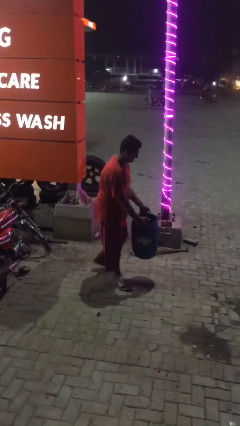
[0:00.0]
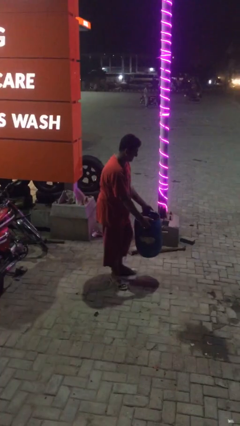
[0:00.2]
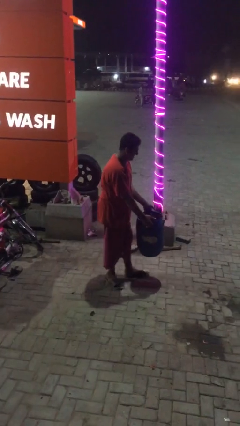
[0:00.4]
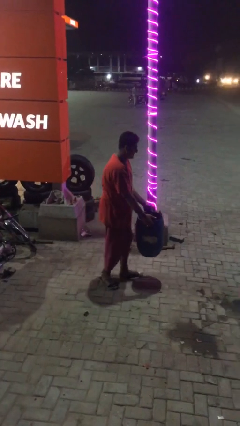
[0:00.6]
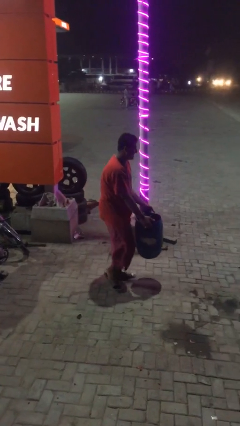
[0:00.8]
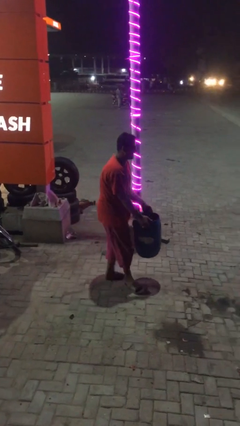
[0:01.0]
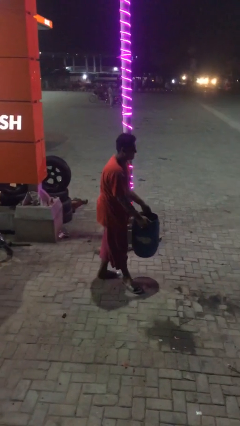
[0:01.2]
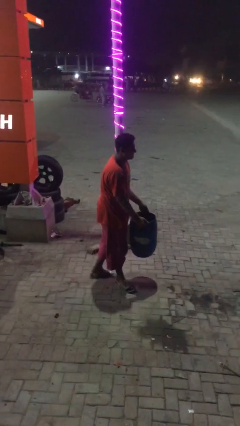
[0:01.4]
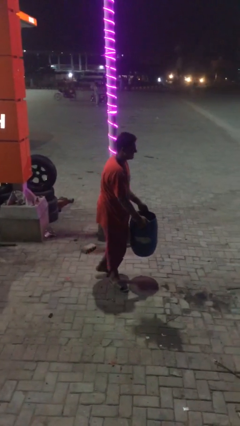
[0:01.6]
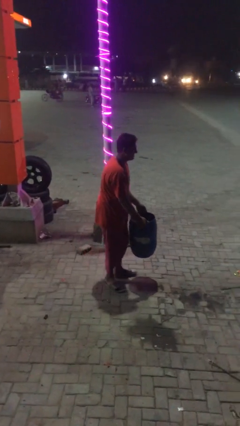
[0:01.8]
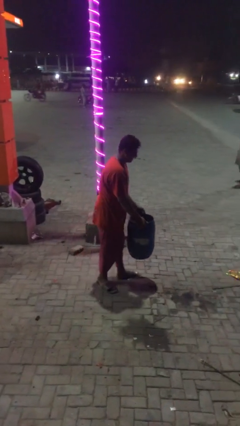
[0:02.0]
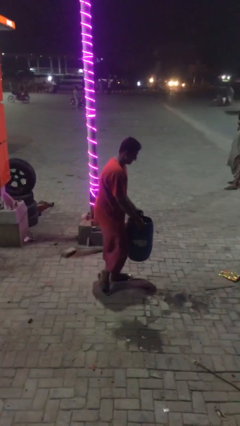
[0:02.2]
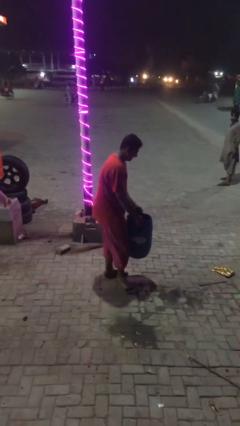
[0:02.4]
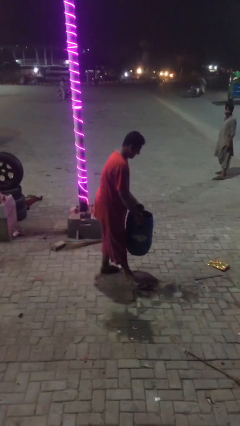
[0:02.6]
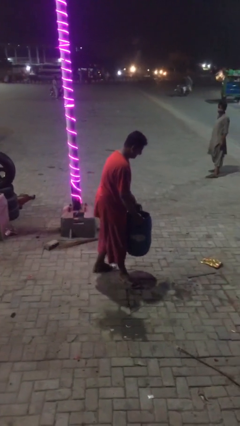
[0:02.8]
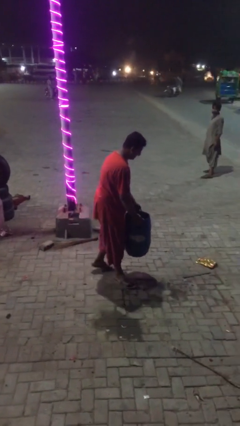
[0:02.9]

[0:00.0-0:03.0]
person carries heavy object

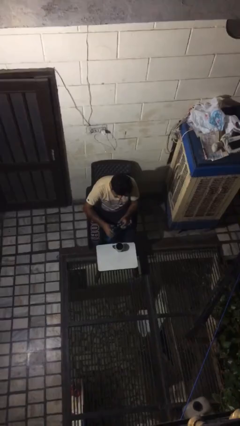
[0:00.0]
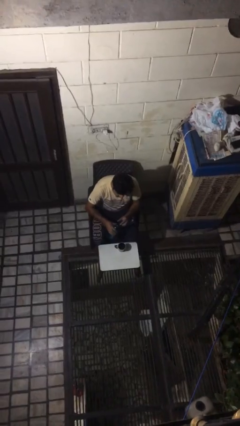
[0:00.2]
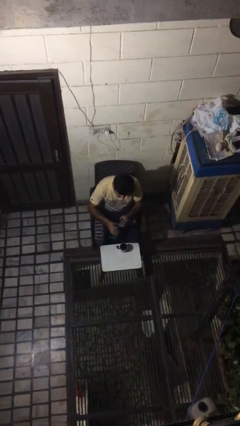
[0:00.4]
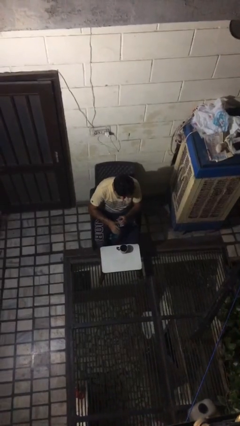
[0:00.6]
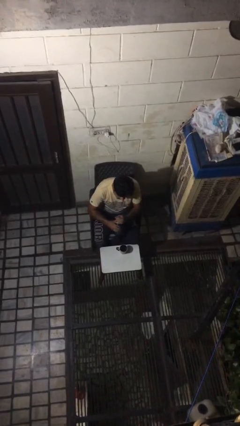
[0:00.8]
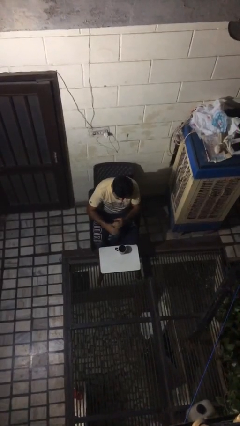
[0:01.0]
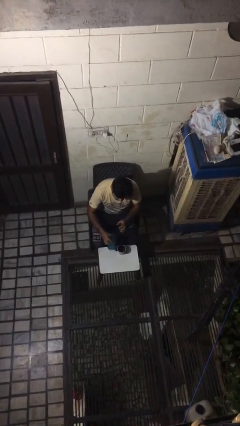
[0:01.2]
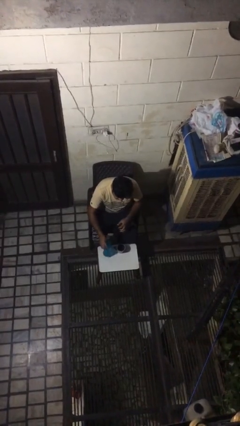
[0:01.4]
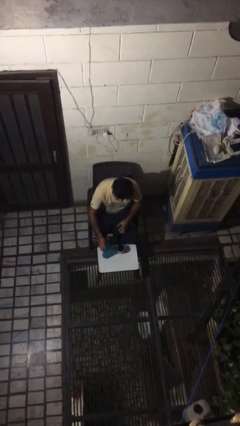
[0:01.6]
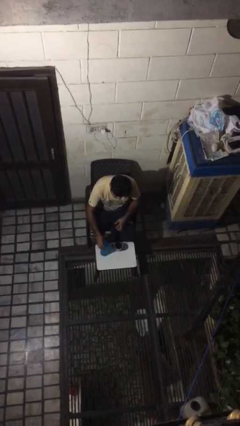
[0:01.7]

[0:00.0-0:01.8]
person screws lid to bottle

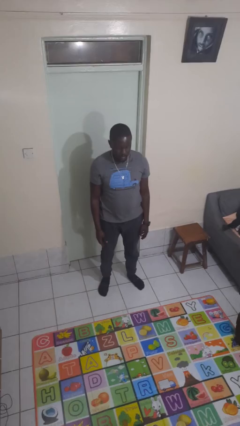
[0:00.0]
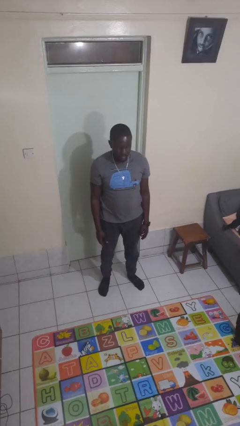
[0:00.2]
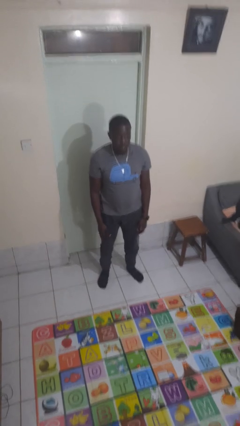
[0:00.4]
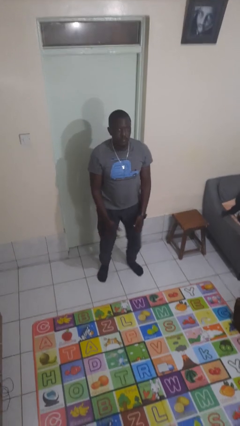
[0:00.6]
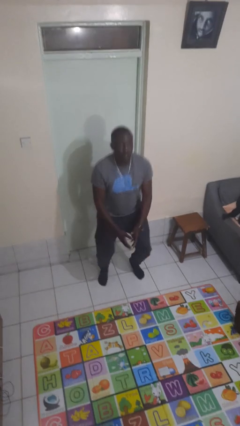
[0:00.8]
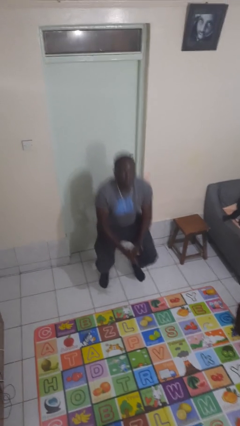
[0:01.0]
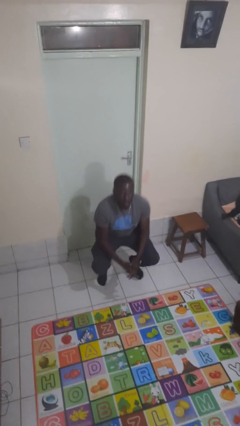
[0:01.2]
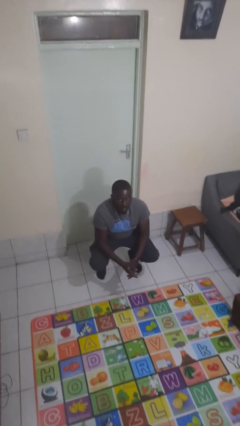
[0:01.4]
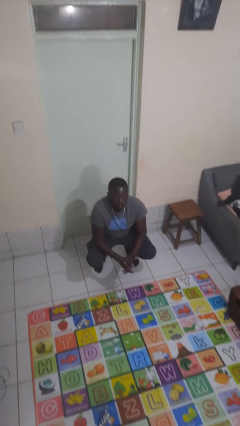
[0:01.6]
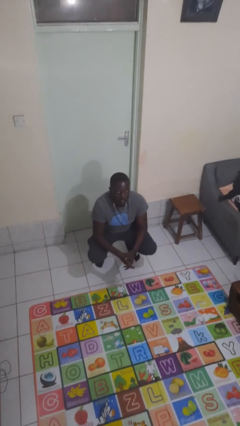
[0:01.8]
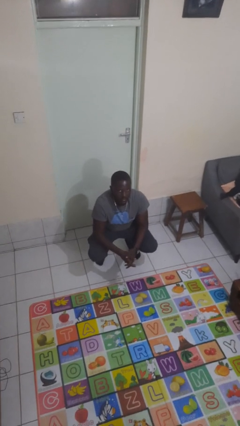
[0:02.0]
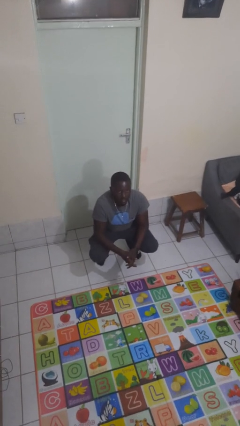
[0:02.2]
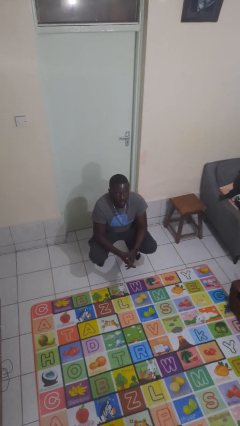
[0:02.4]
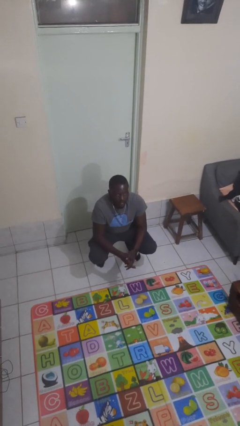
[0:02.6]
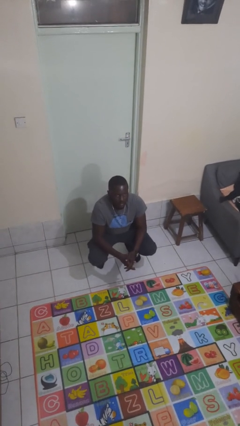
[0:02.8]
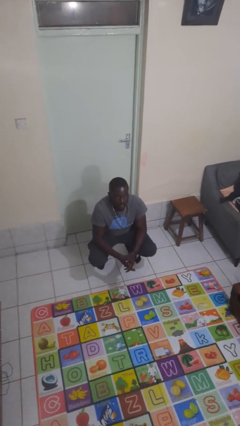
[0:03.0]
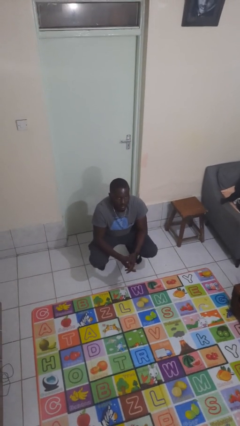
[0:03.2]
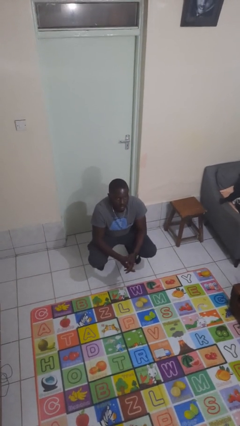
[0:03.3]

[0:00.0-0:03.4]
person squats

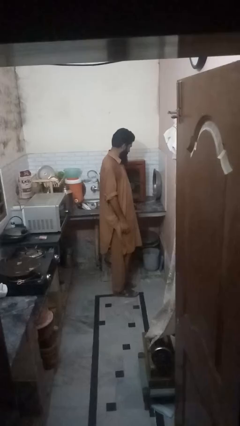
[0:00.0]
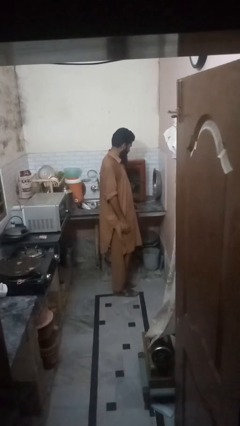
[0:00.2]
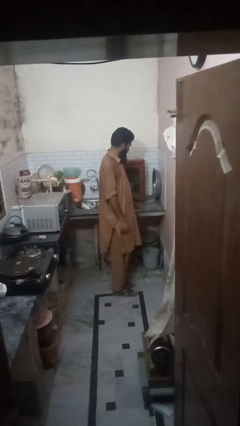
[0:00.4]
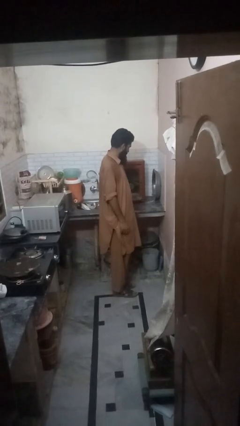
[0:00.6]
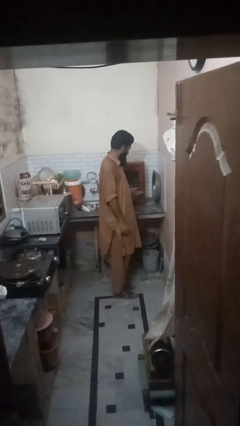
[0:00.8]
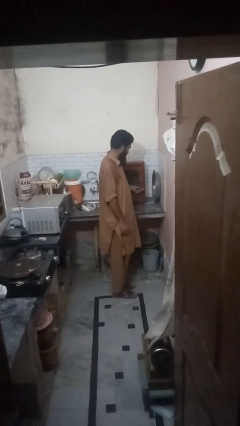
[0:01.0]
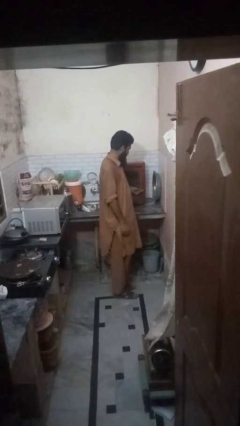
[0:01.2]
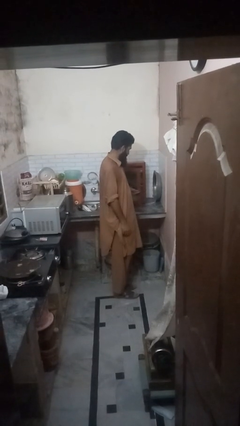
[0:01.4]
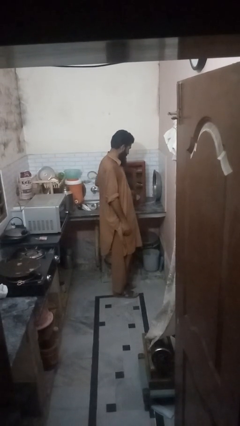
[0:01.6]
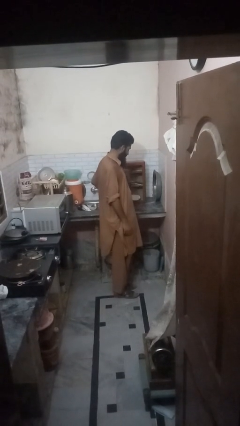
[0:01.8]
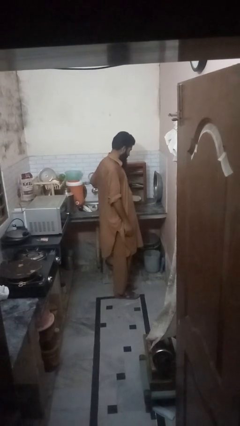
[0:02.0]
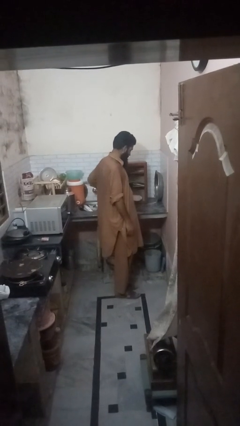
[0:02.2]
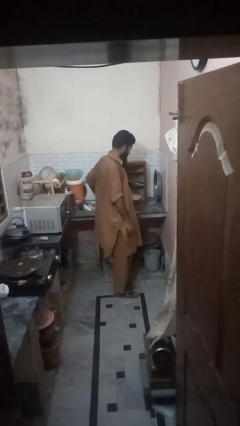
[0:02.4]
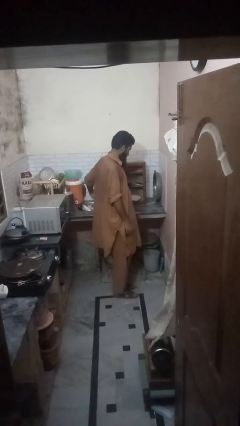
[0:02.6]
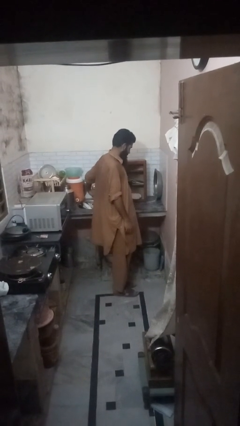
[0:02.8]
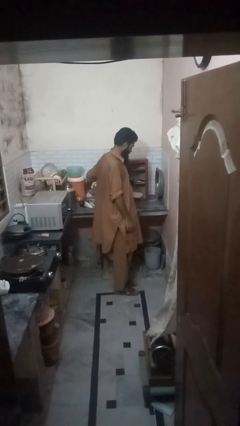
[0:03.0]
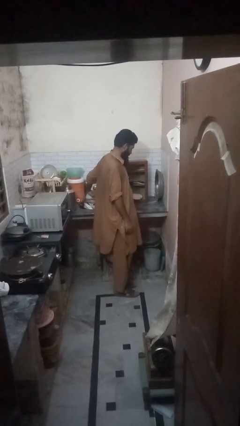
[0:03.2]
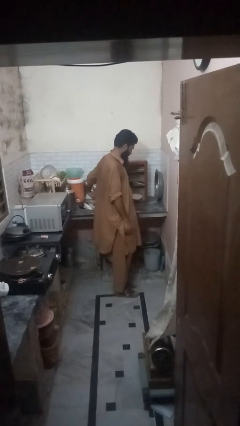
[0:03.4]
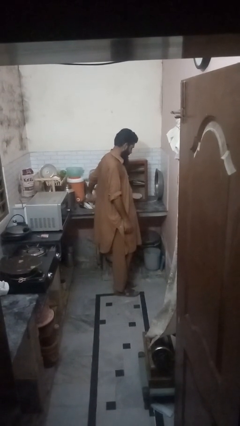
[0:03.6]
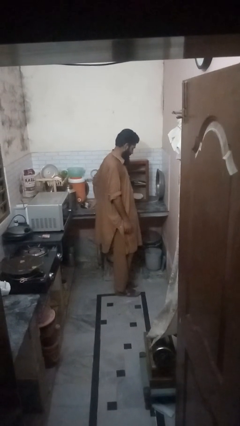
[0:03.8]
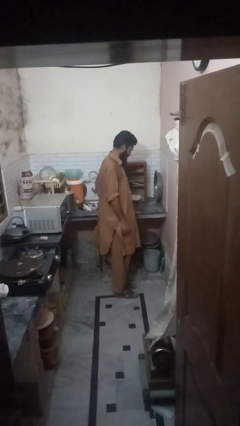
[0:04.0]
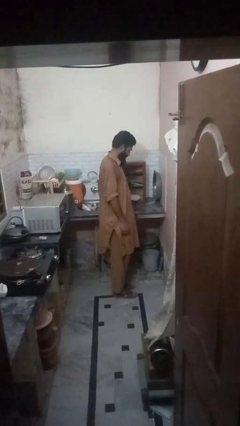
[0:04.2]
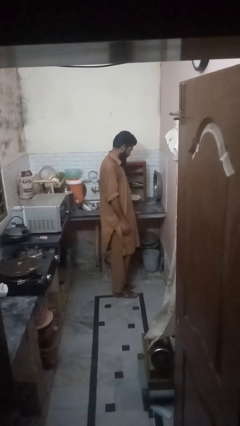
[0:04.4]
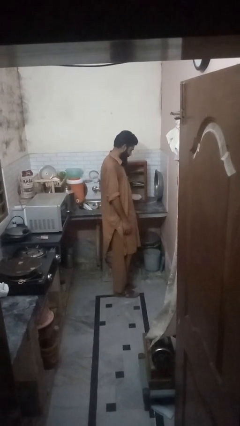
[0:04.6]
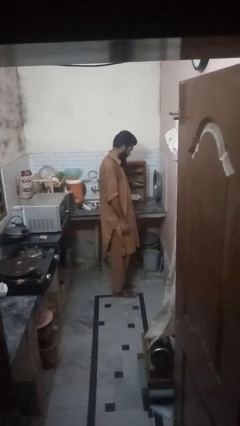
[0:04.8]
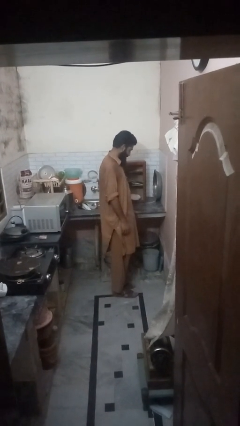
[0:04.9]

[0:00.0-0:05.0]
person opens cabinet

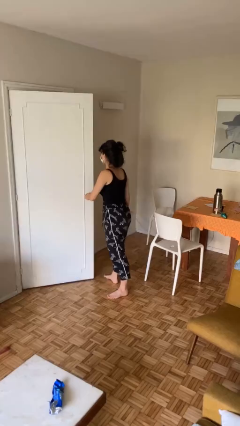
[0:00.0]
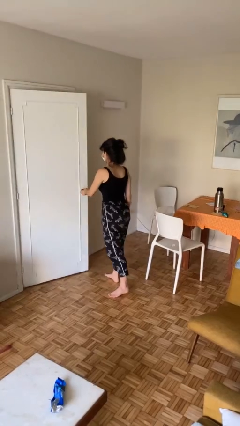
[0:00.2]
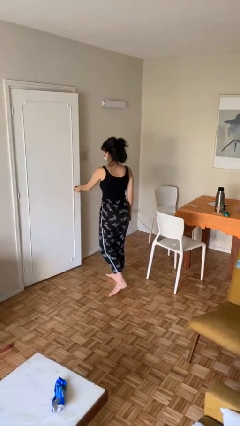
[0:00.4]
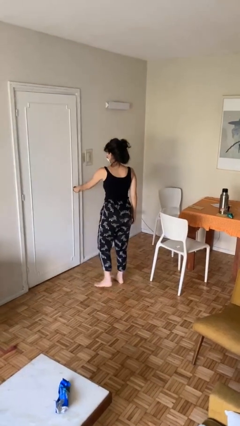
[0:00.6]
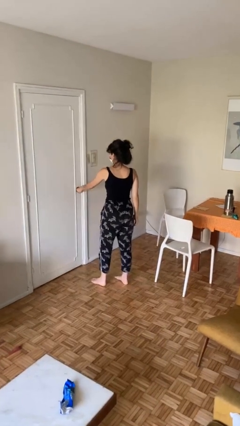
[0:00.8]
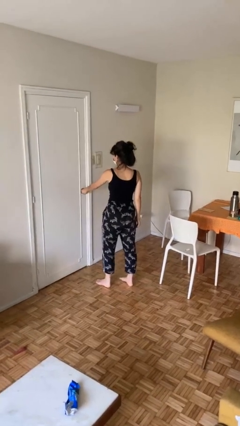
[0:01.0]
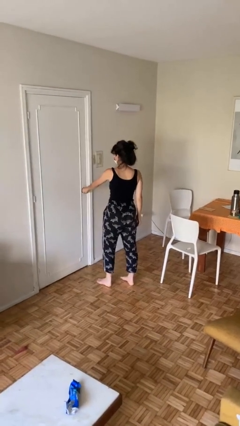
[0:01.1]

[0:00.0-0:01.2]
person closes facility door

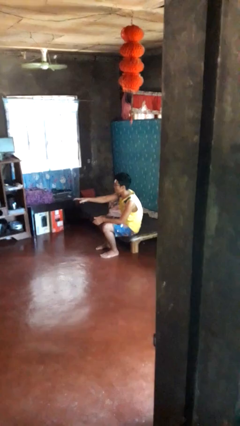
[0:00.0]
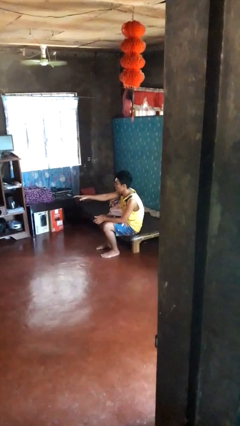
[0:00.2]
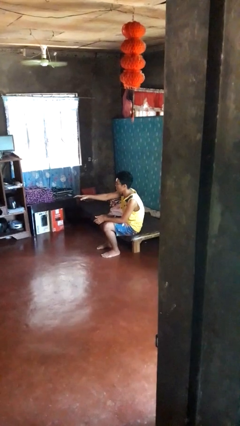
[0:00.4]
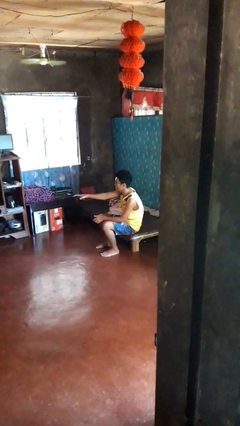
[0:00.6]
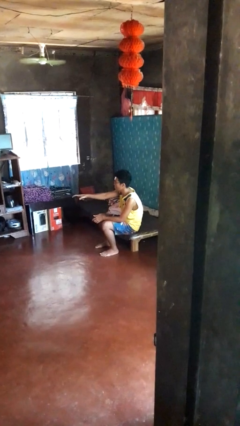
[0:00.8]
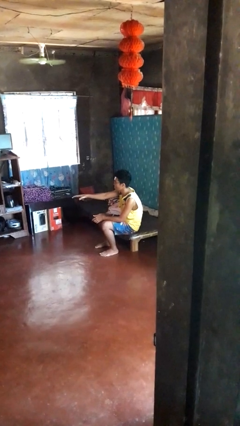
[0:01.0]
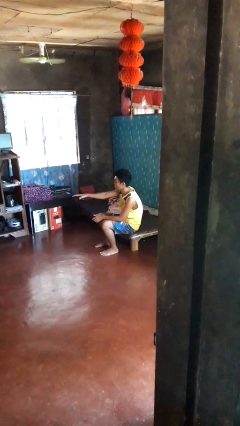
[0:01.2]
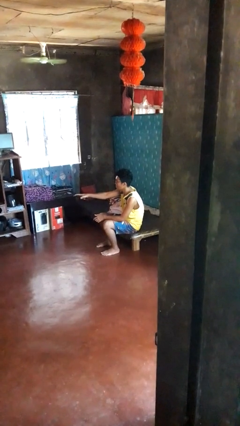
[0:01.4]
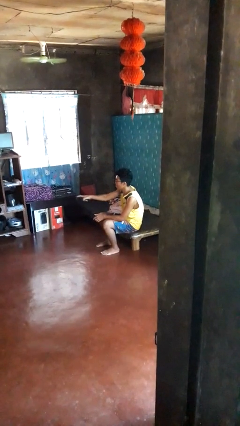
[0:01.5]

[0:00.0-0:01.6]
person uses television remote

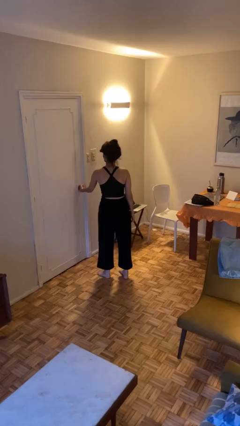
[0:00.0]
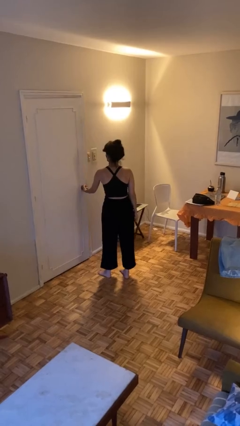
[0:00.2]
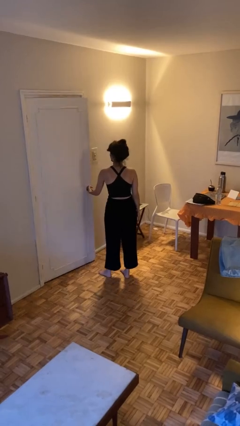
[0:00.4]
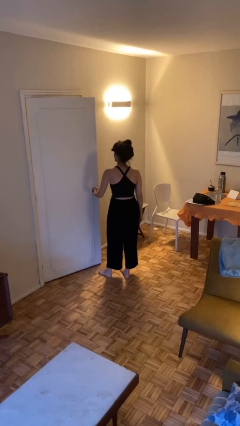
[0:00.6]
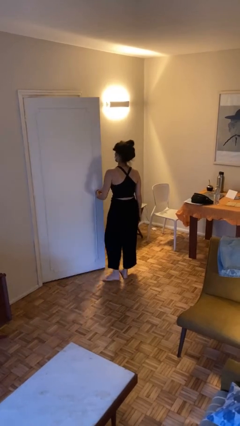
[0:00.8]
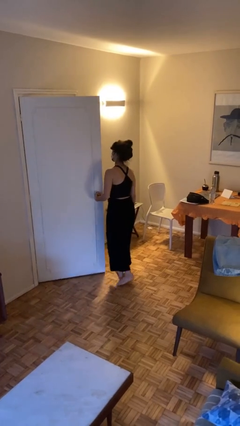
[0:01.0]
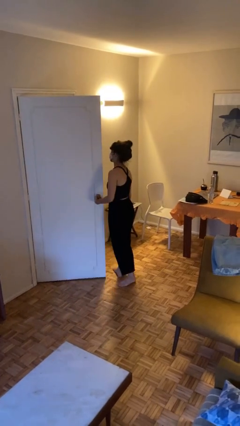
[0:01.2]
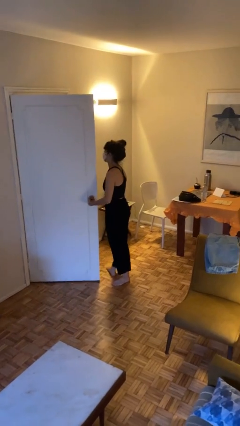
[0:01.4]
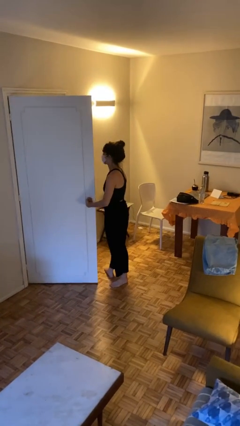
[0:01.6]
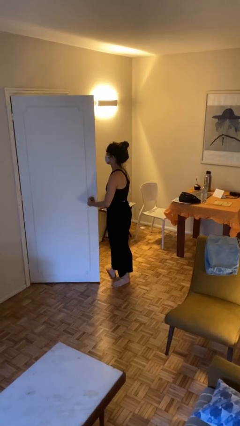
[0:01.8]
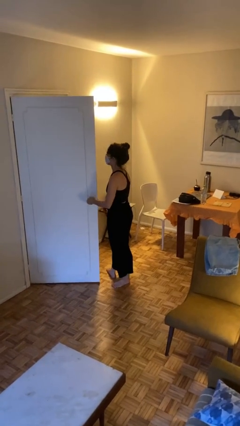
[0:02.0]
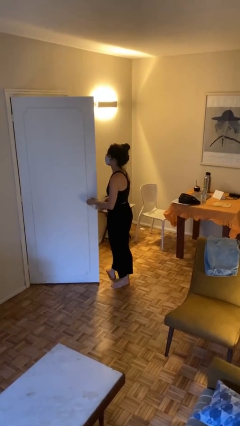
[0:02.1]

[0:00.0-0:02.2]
person opens facility door
